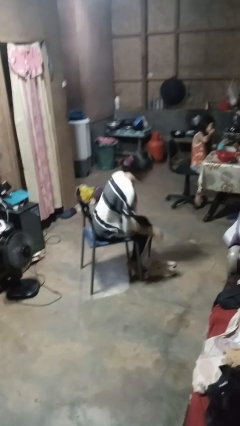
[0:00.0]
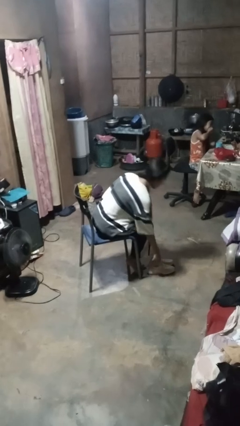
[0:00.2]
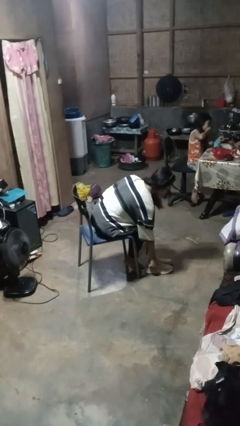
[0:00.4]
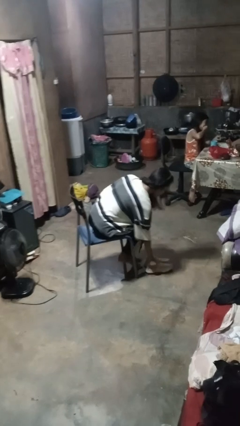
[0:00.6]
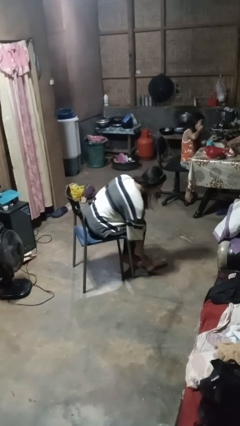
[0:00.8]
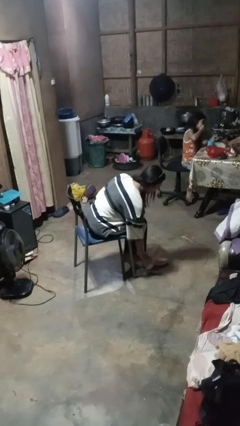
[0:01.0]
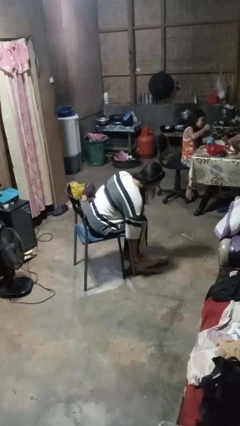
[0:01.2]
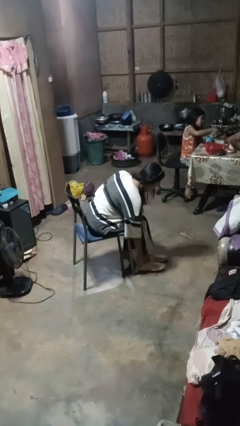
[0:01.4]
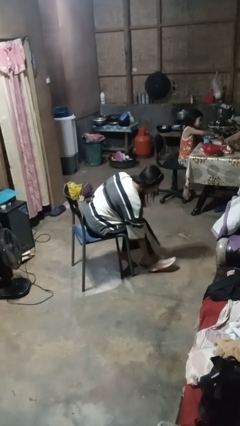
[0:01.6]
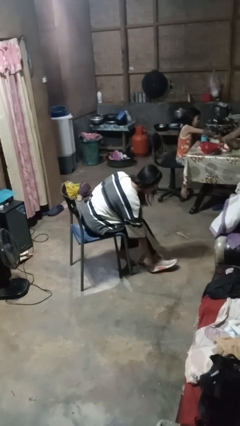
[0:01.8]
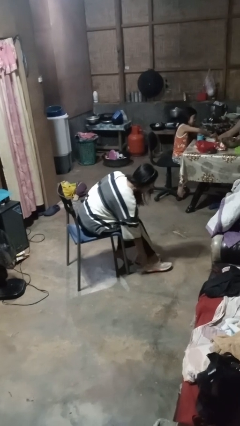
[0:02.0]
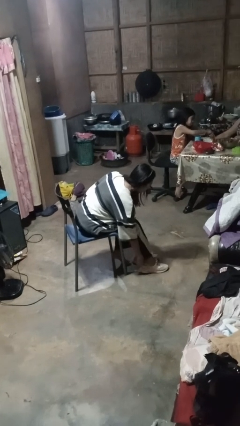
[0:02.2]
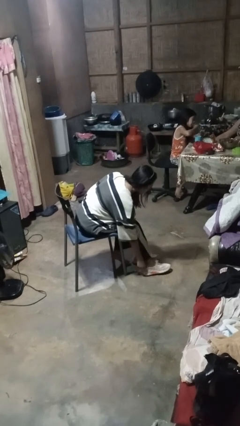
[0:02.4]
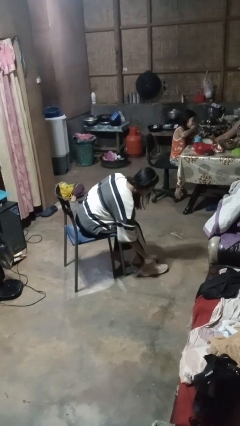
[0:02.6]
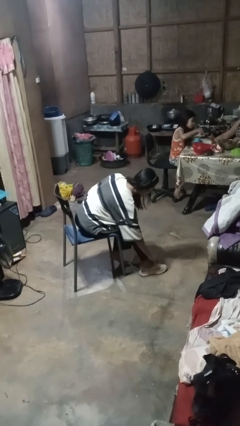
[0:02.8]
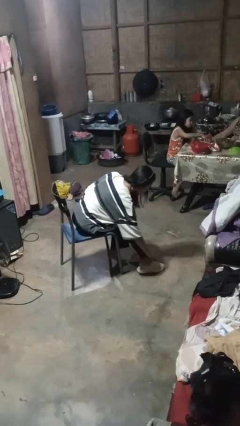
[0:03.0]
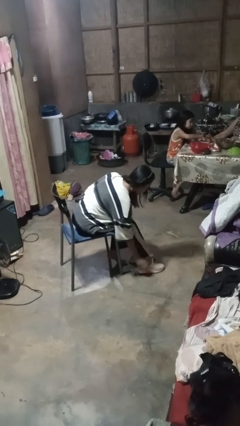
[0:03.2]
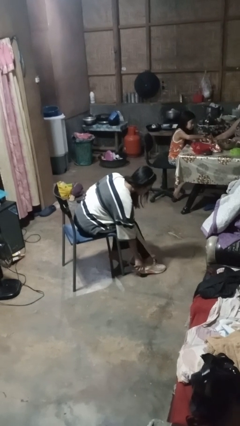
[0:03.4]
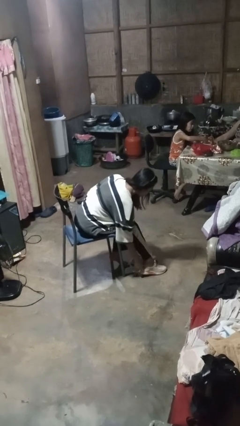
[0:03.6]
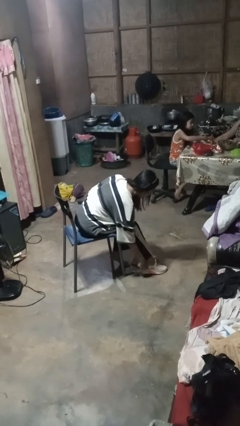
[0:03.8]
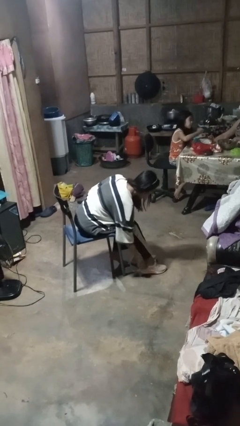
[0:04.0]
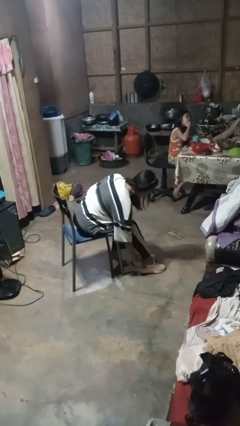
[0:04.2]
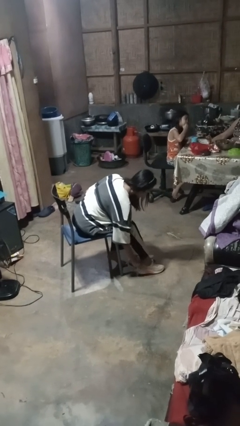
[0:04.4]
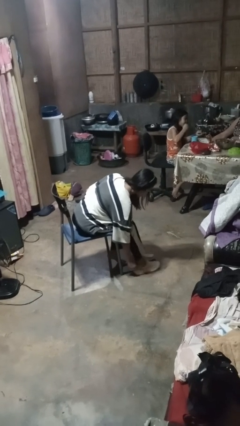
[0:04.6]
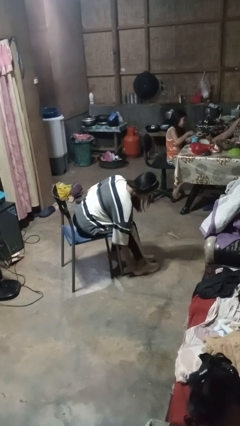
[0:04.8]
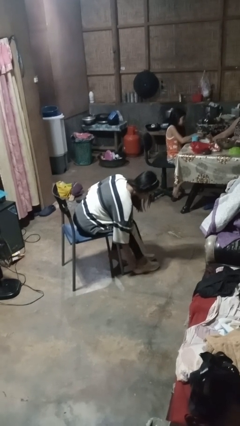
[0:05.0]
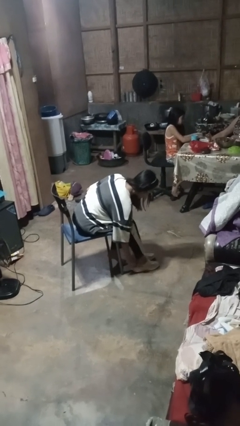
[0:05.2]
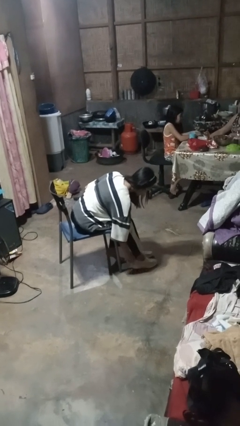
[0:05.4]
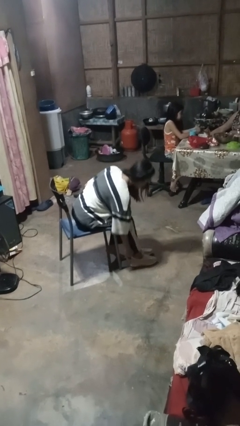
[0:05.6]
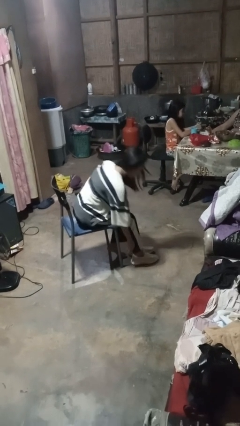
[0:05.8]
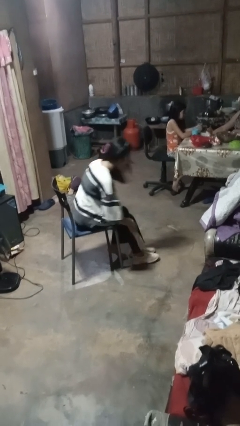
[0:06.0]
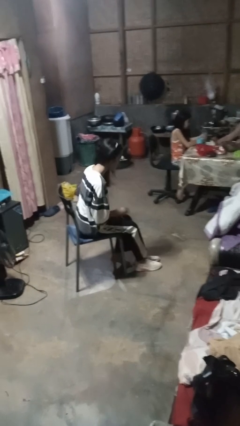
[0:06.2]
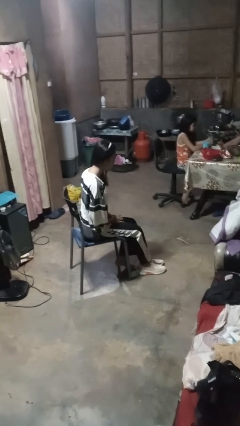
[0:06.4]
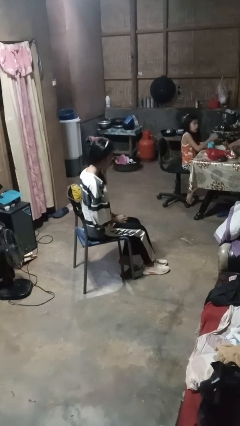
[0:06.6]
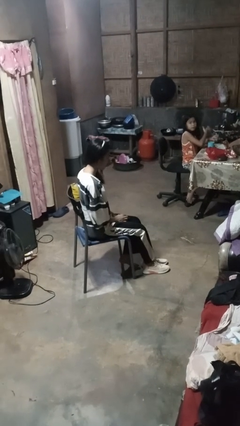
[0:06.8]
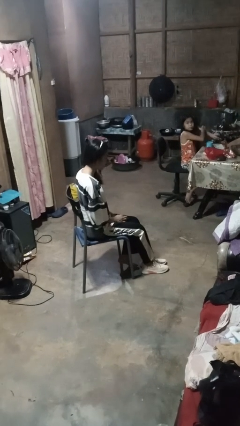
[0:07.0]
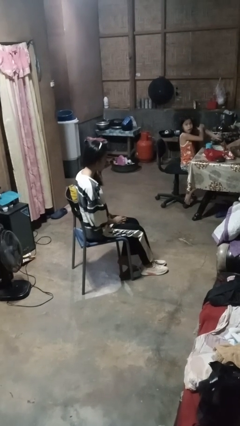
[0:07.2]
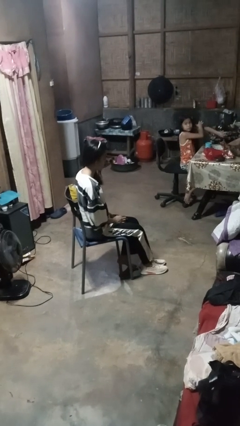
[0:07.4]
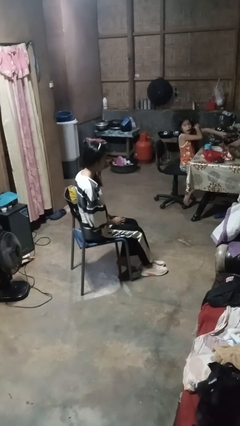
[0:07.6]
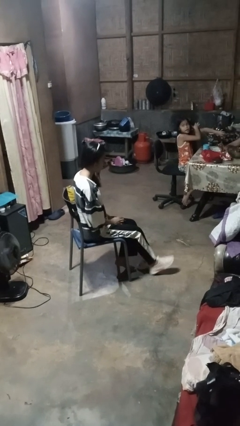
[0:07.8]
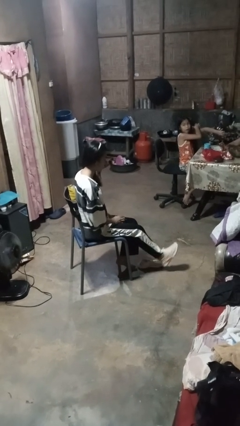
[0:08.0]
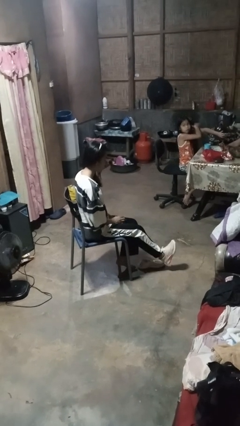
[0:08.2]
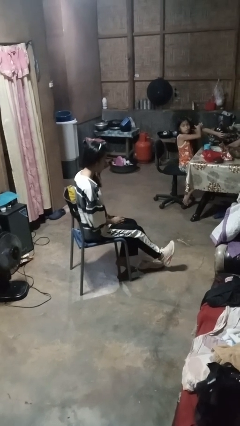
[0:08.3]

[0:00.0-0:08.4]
person puts on shoes

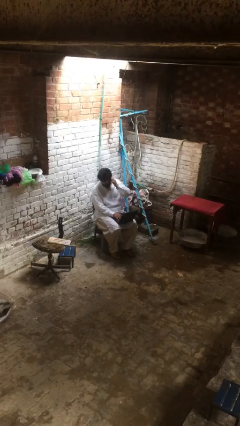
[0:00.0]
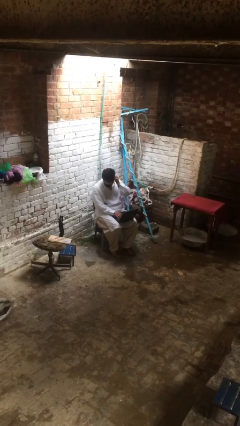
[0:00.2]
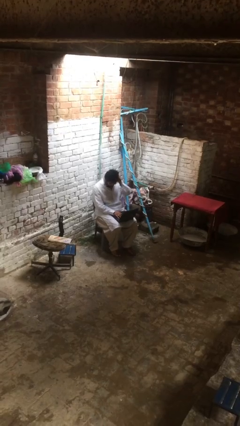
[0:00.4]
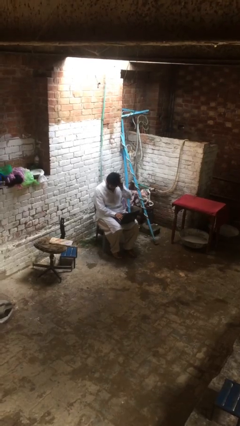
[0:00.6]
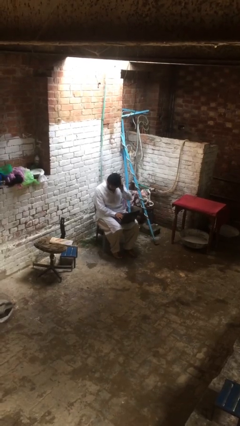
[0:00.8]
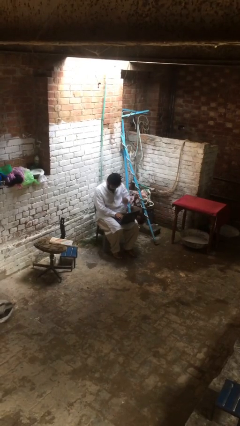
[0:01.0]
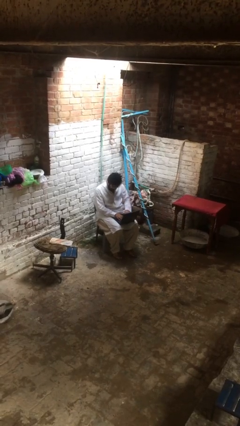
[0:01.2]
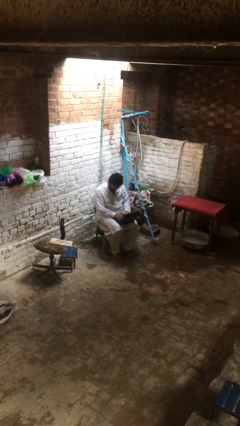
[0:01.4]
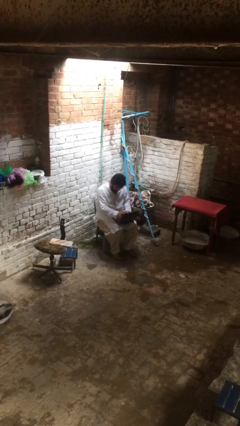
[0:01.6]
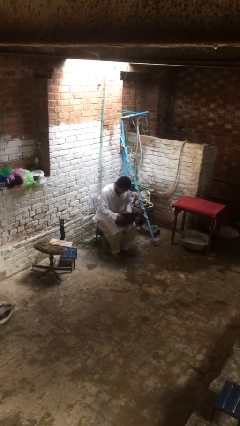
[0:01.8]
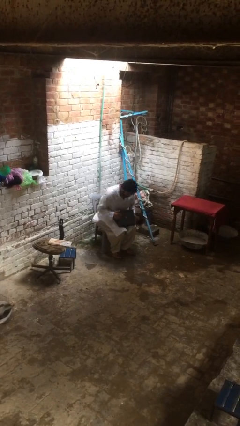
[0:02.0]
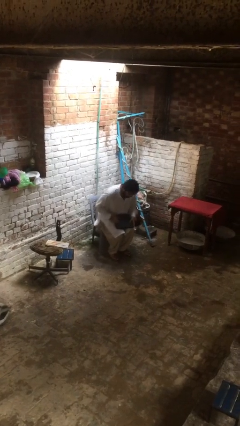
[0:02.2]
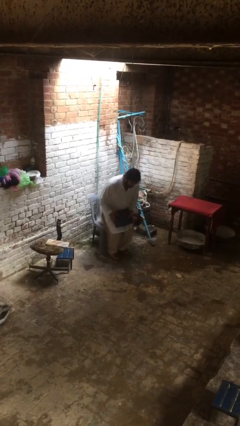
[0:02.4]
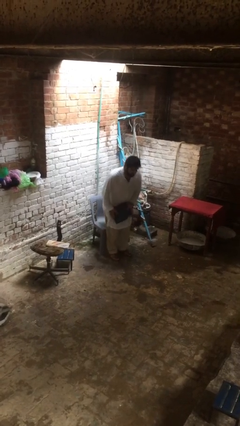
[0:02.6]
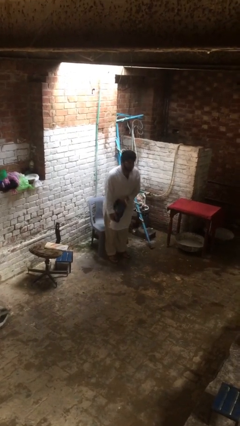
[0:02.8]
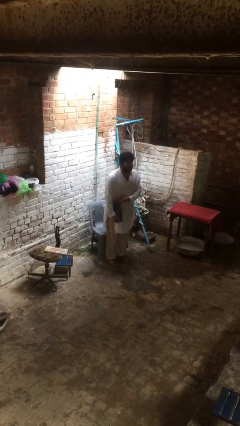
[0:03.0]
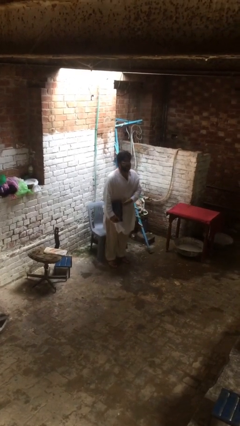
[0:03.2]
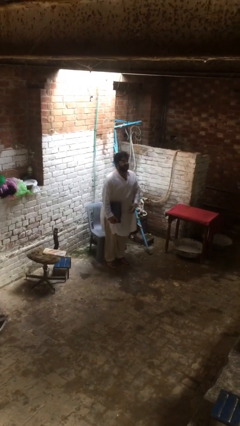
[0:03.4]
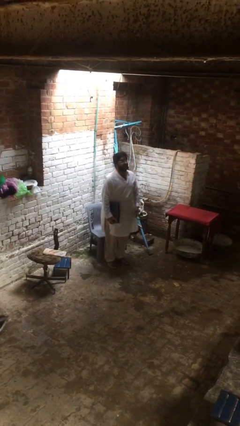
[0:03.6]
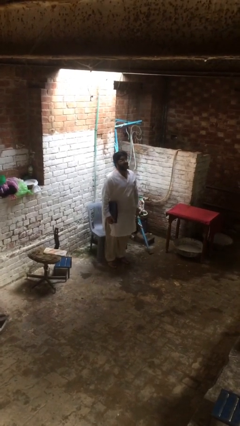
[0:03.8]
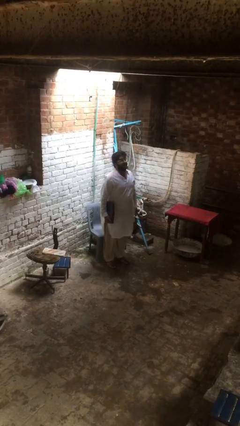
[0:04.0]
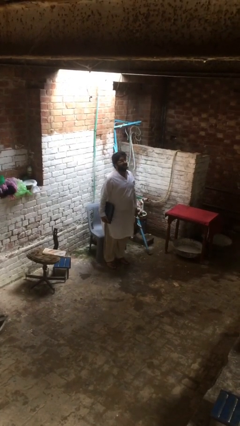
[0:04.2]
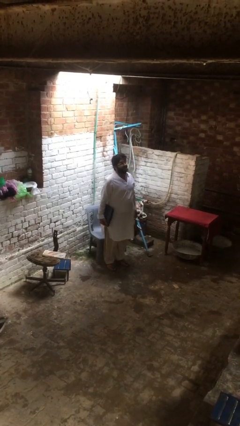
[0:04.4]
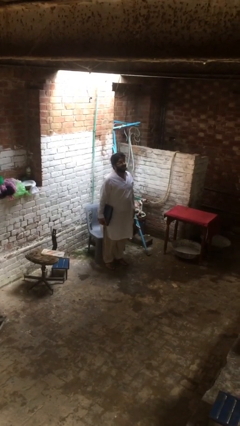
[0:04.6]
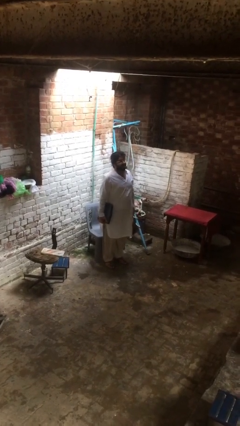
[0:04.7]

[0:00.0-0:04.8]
person stands up

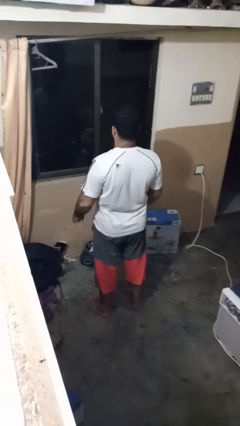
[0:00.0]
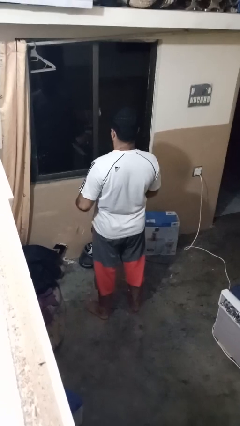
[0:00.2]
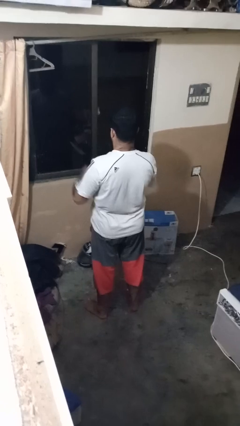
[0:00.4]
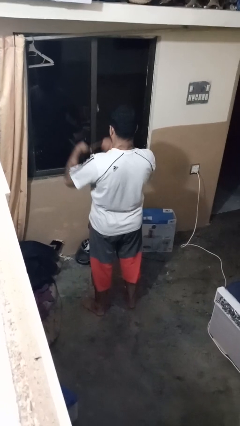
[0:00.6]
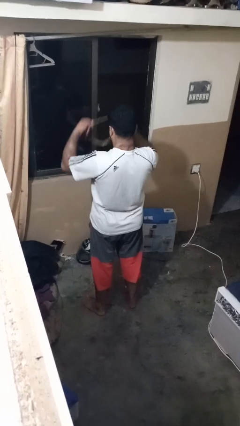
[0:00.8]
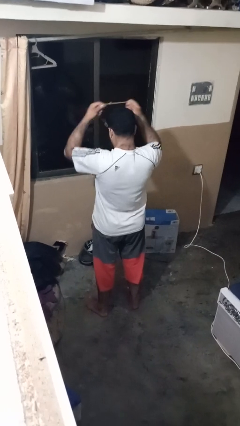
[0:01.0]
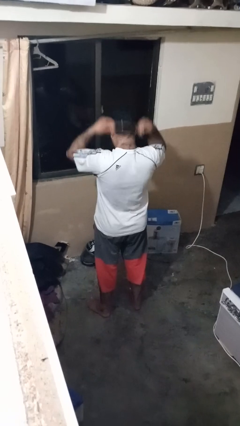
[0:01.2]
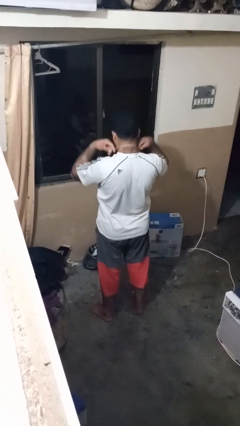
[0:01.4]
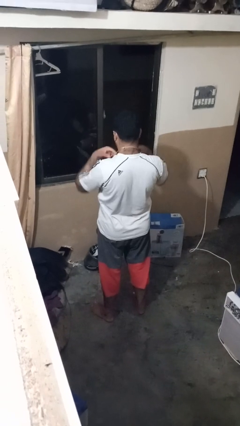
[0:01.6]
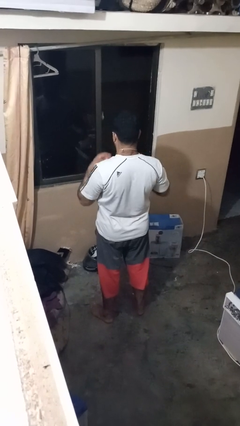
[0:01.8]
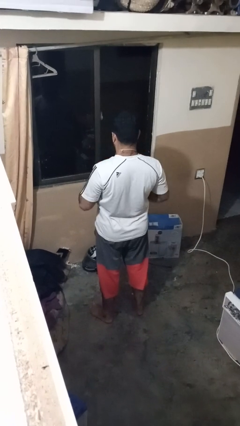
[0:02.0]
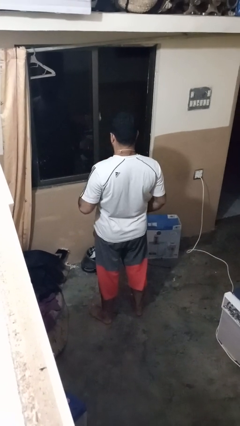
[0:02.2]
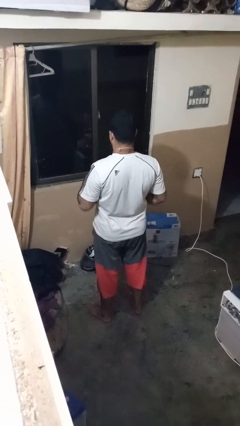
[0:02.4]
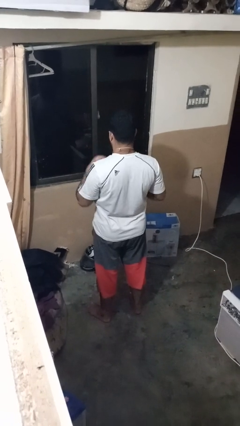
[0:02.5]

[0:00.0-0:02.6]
person puts on necklace

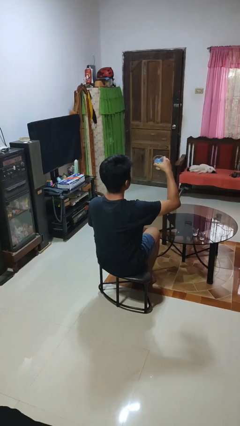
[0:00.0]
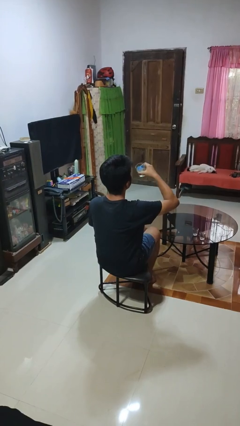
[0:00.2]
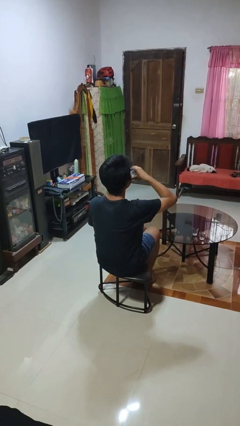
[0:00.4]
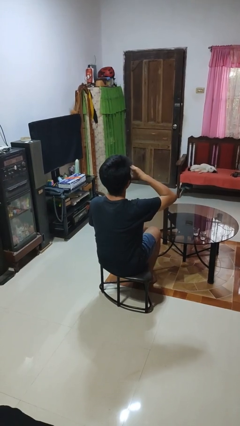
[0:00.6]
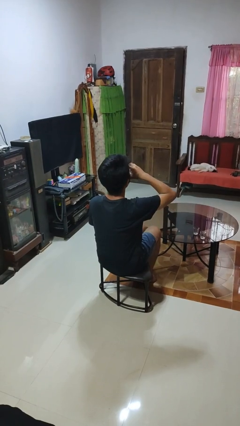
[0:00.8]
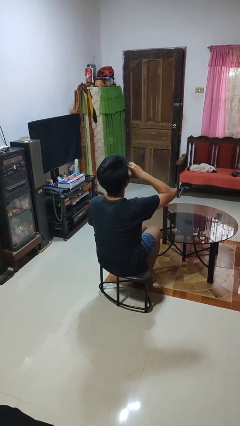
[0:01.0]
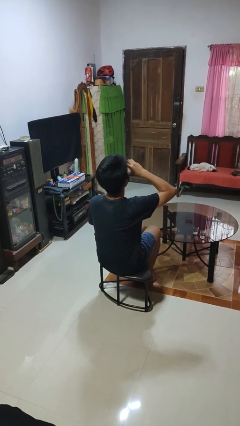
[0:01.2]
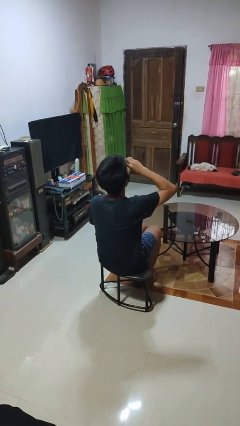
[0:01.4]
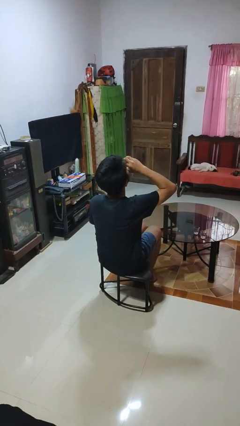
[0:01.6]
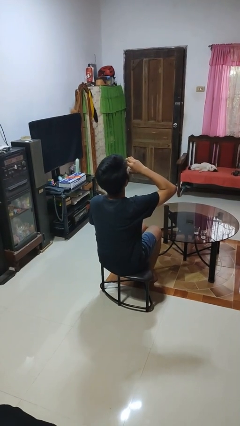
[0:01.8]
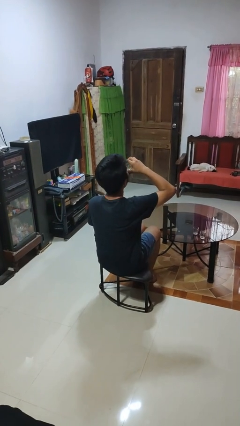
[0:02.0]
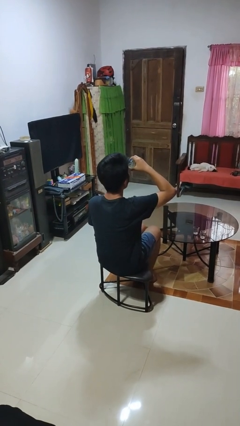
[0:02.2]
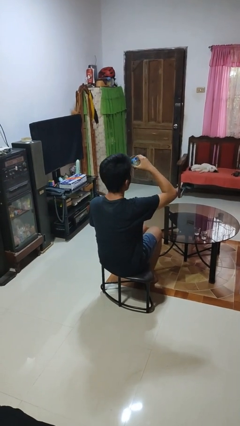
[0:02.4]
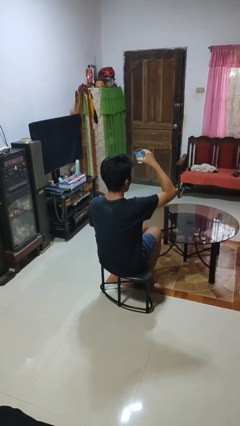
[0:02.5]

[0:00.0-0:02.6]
person drinks from shotglass
